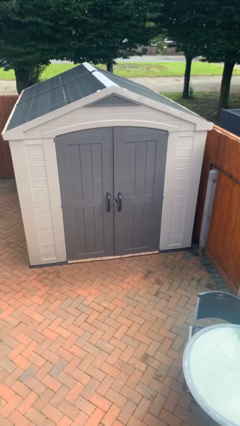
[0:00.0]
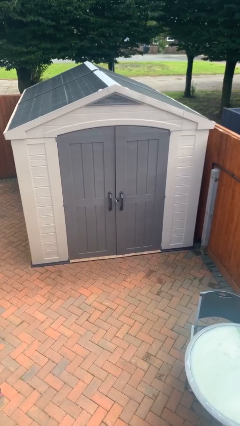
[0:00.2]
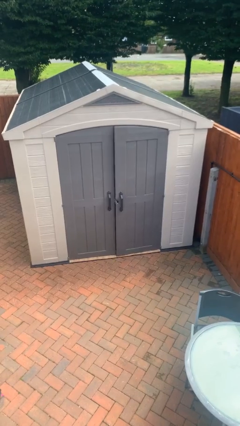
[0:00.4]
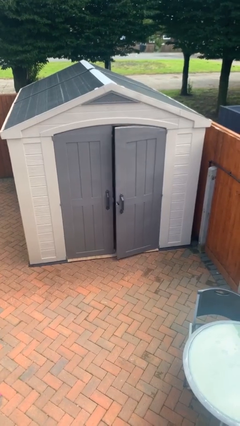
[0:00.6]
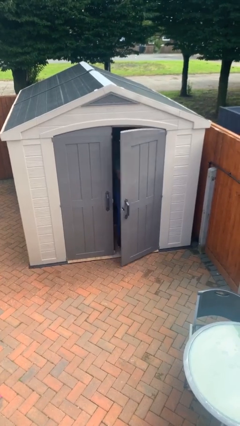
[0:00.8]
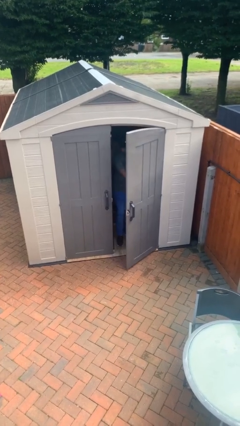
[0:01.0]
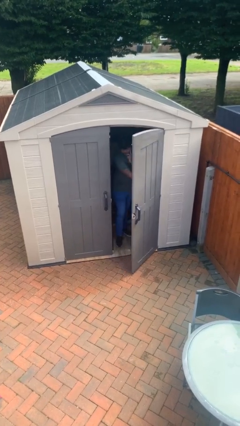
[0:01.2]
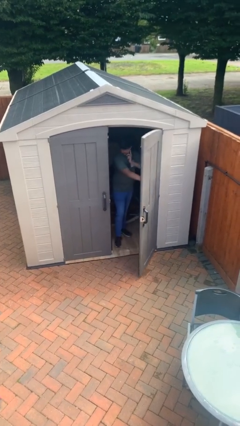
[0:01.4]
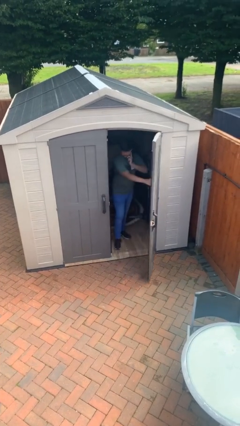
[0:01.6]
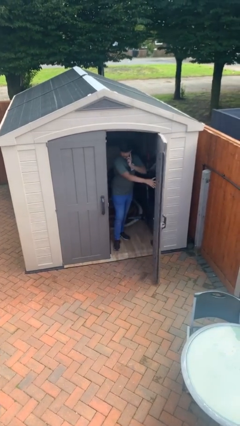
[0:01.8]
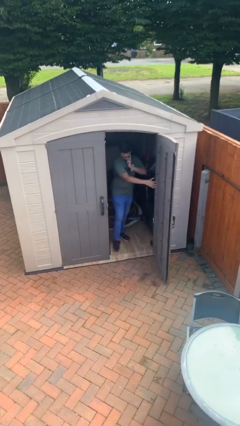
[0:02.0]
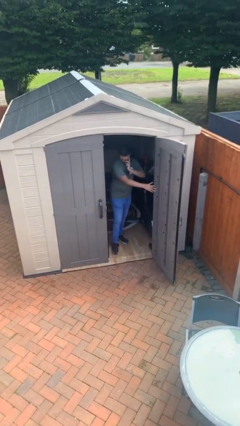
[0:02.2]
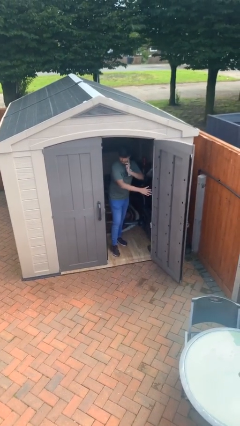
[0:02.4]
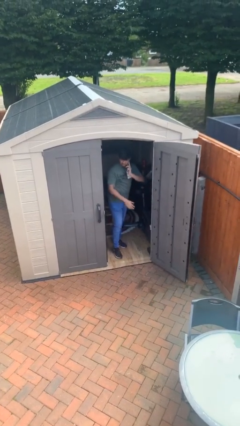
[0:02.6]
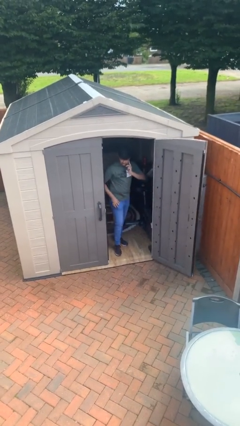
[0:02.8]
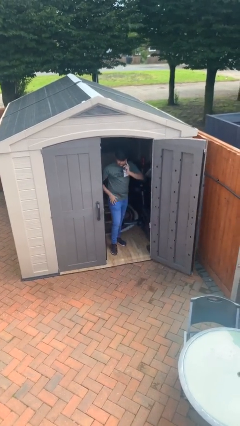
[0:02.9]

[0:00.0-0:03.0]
person opens facility door

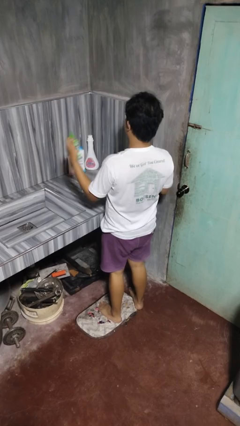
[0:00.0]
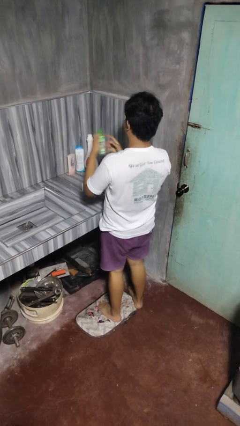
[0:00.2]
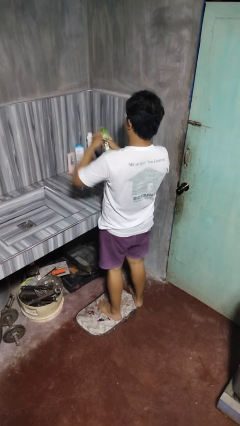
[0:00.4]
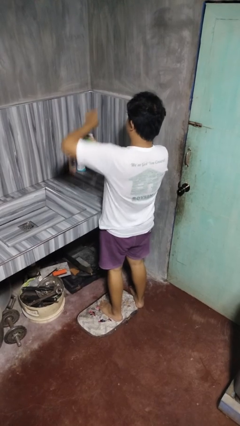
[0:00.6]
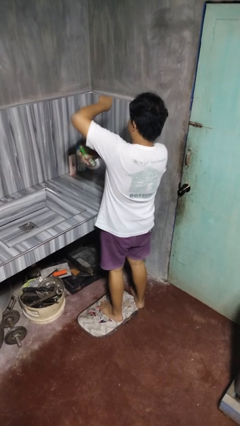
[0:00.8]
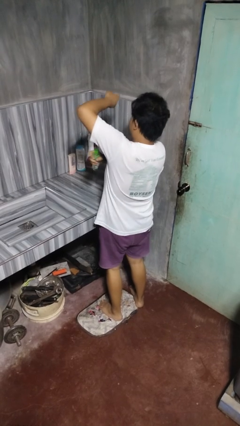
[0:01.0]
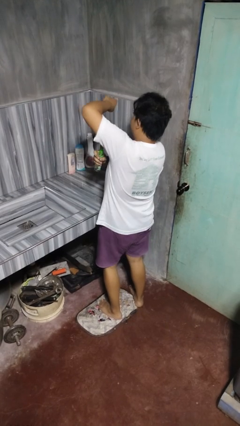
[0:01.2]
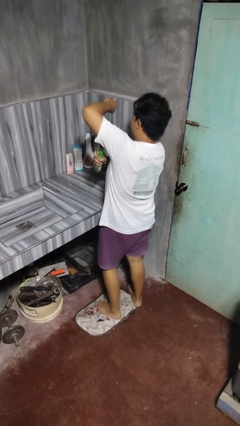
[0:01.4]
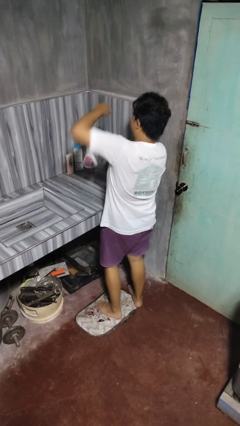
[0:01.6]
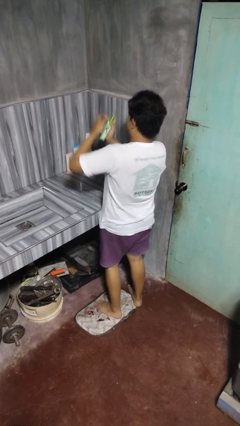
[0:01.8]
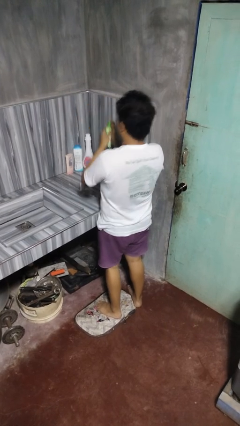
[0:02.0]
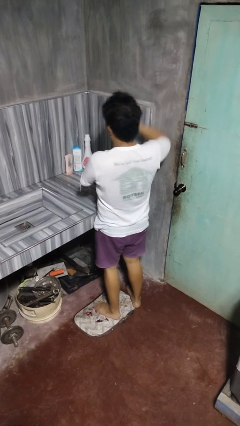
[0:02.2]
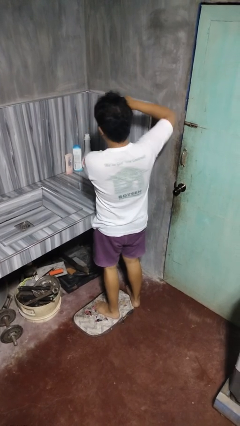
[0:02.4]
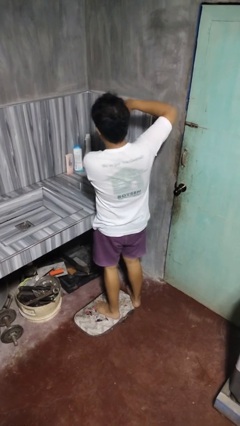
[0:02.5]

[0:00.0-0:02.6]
person applies deodorant

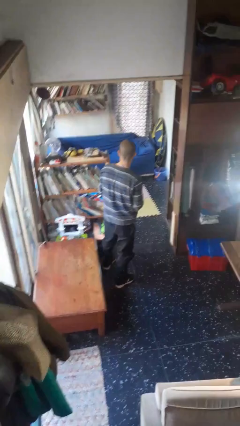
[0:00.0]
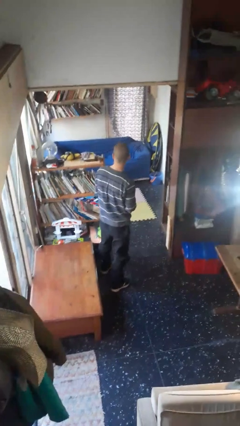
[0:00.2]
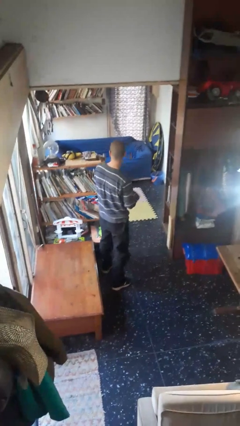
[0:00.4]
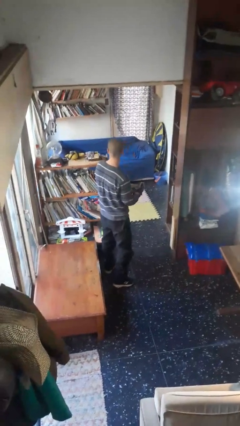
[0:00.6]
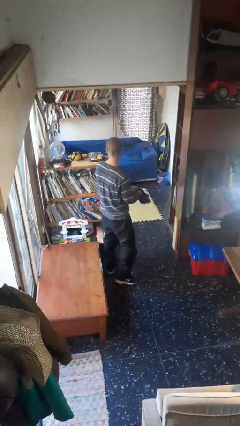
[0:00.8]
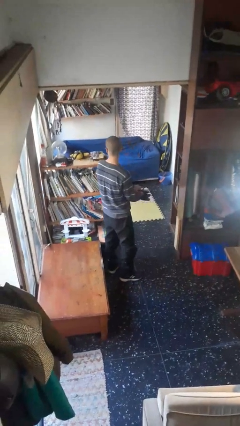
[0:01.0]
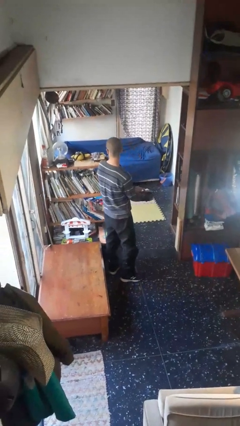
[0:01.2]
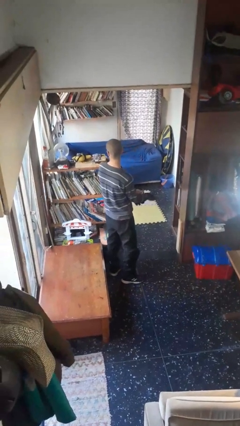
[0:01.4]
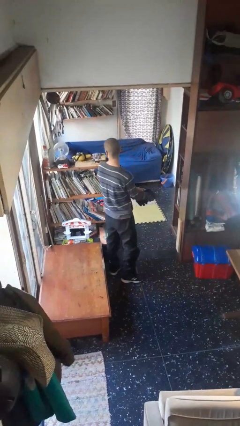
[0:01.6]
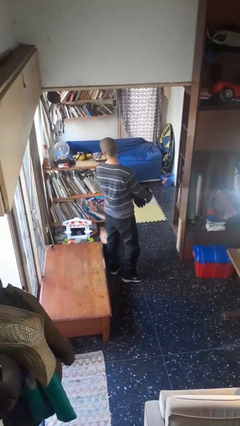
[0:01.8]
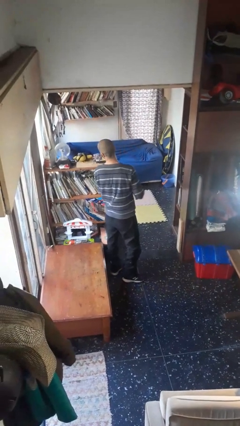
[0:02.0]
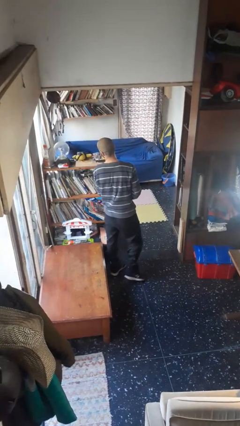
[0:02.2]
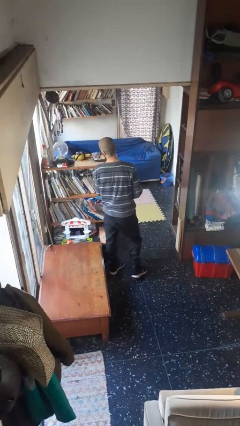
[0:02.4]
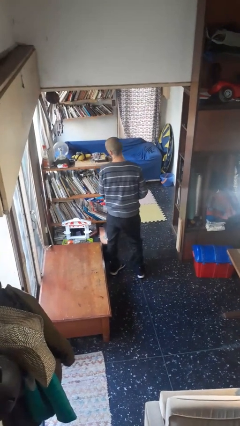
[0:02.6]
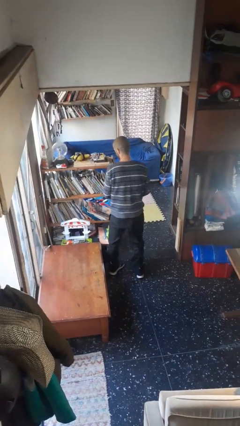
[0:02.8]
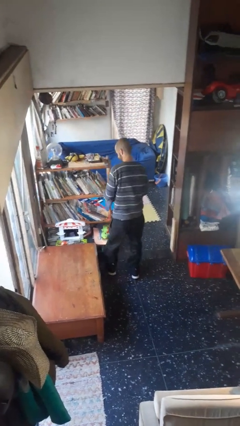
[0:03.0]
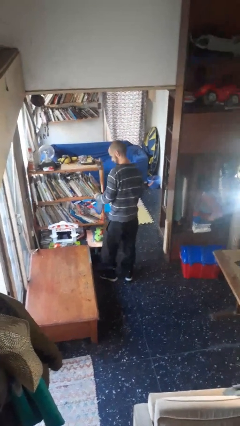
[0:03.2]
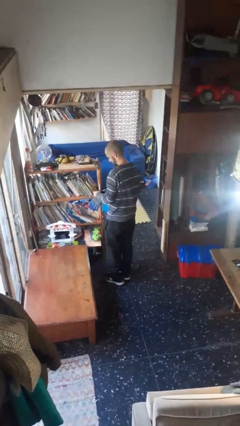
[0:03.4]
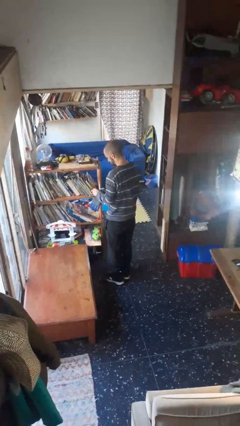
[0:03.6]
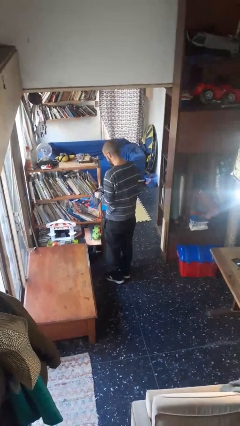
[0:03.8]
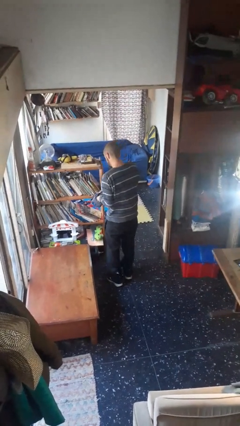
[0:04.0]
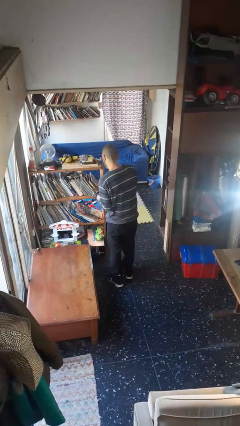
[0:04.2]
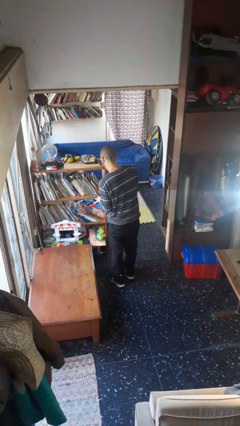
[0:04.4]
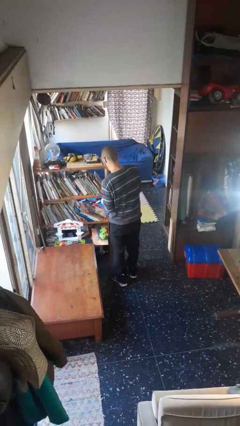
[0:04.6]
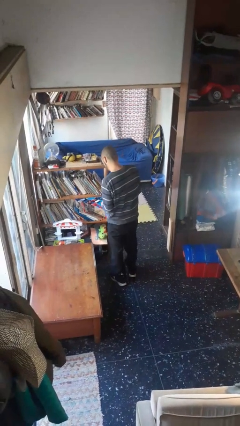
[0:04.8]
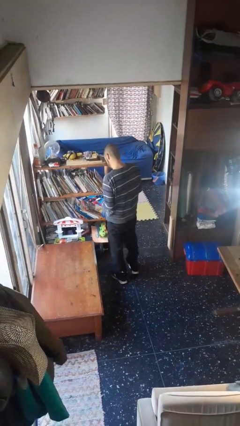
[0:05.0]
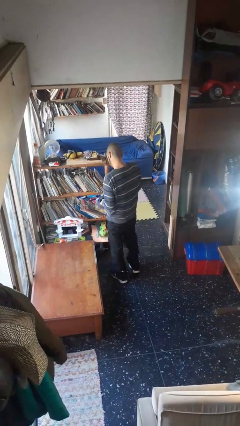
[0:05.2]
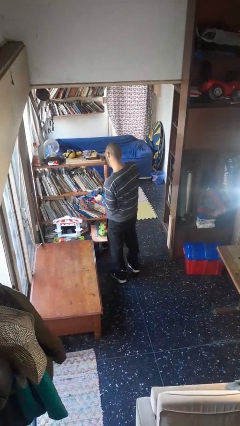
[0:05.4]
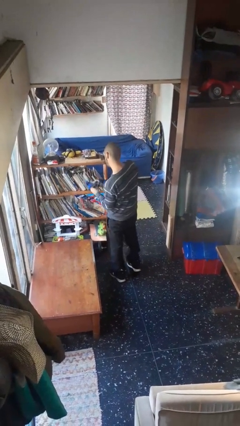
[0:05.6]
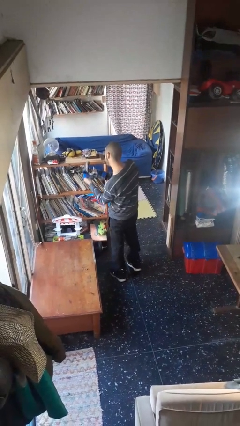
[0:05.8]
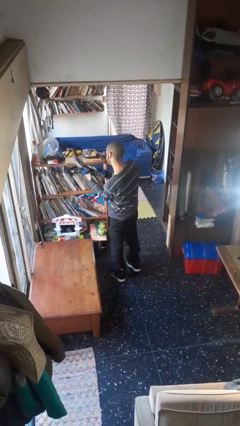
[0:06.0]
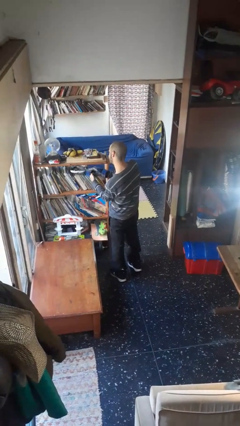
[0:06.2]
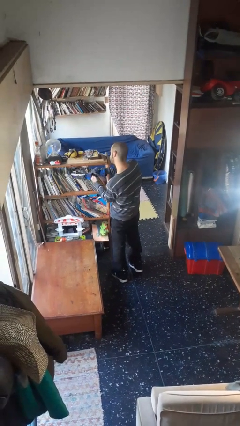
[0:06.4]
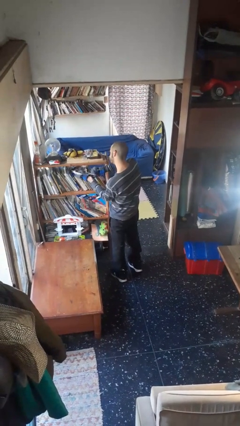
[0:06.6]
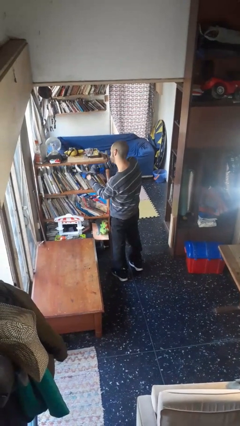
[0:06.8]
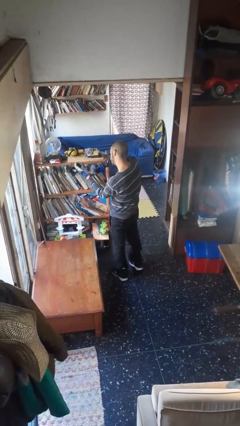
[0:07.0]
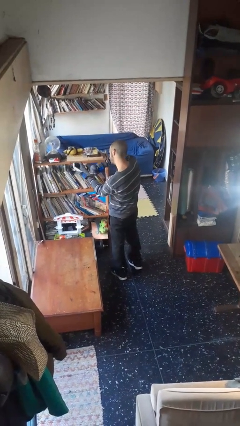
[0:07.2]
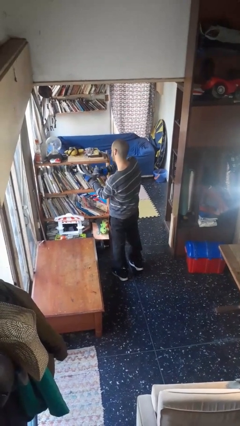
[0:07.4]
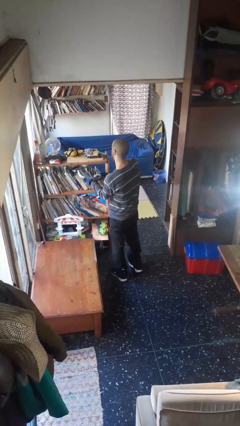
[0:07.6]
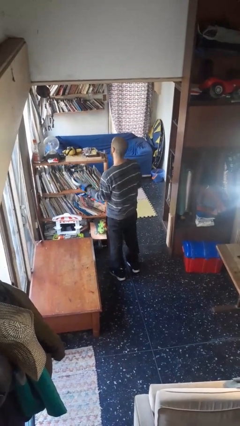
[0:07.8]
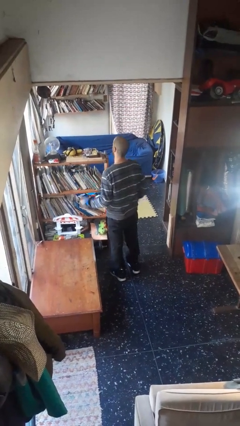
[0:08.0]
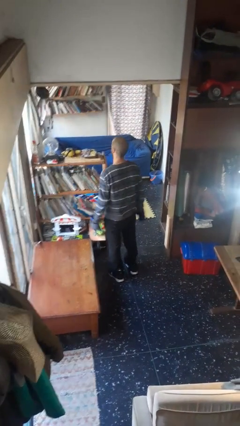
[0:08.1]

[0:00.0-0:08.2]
person puts on gloves

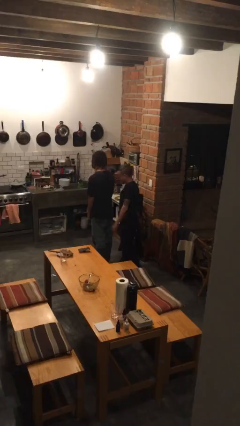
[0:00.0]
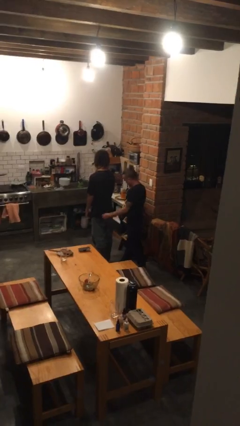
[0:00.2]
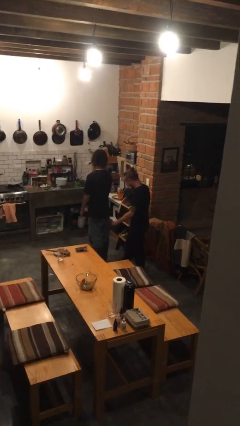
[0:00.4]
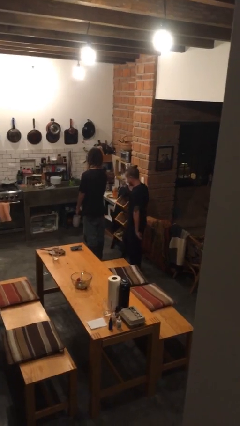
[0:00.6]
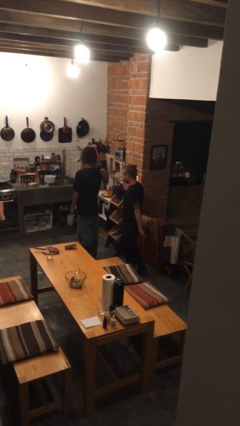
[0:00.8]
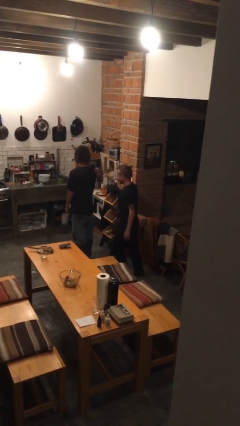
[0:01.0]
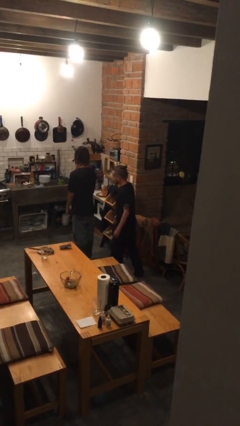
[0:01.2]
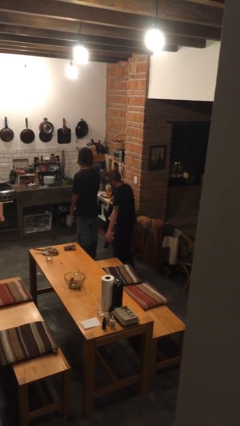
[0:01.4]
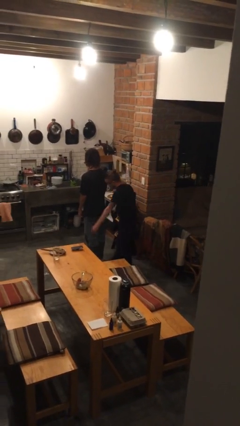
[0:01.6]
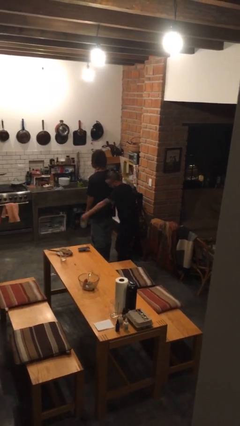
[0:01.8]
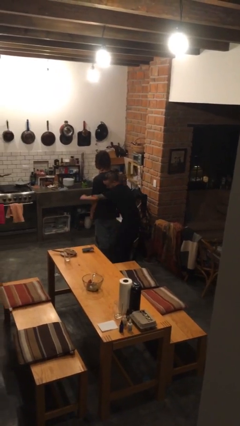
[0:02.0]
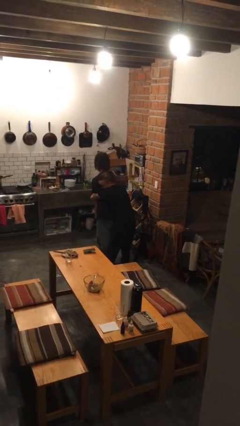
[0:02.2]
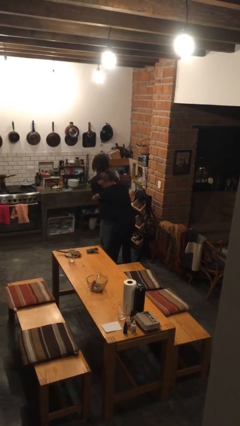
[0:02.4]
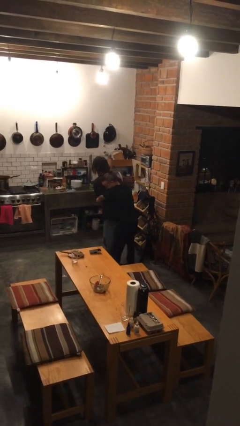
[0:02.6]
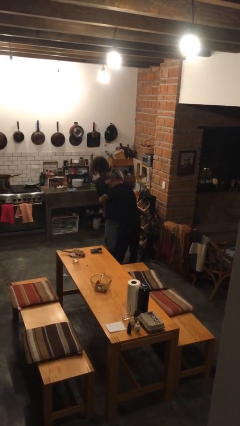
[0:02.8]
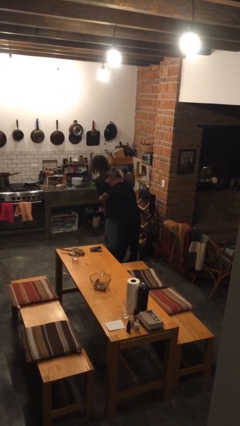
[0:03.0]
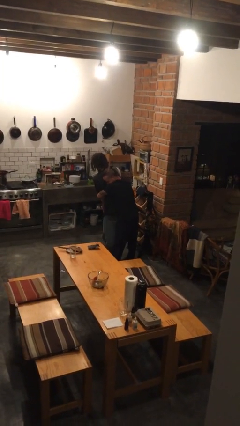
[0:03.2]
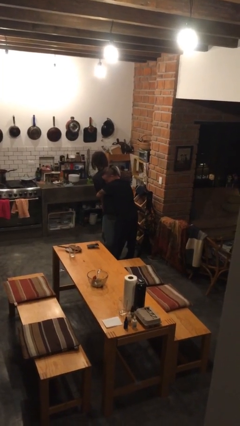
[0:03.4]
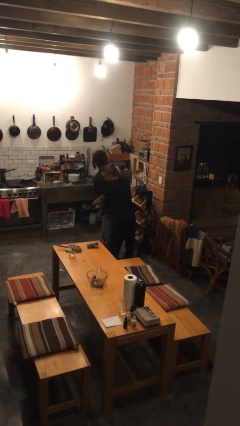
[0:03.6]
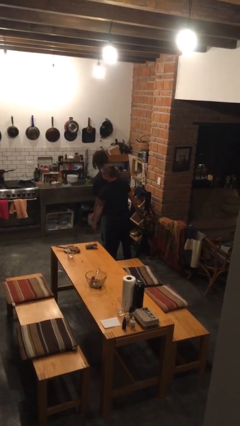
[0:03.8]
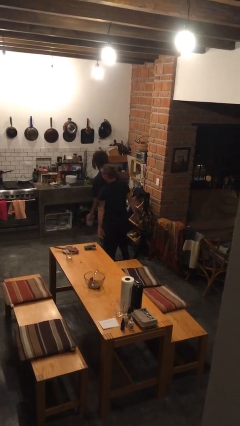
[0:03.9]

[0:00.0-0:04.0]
person hugs person from behind

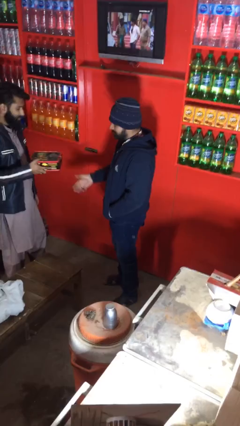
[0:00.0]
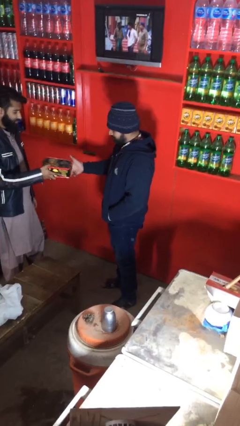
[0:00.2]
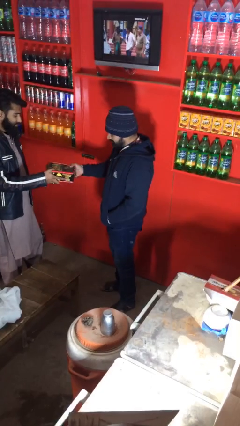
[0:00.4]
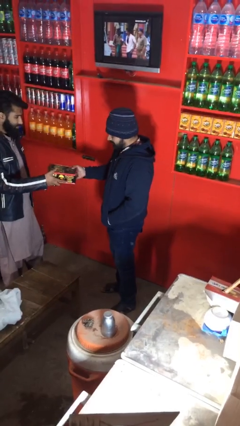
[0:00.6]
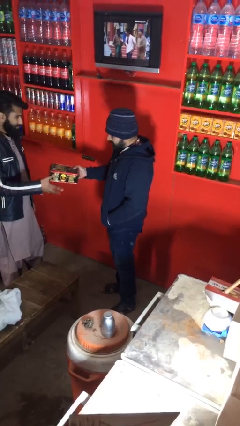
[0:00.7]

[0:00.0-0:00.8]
person transfers object to person
